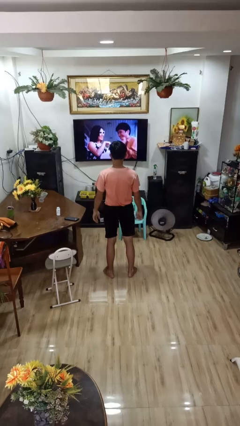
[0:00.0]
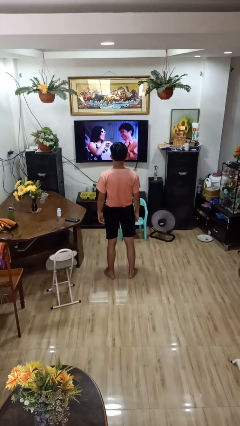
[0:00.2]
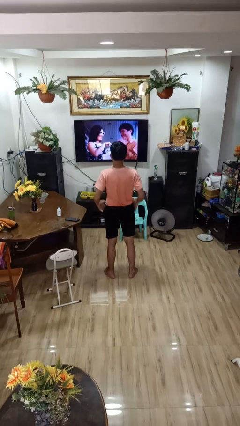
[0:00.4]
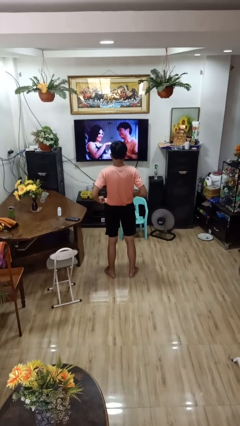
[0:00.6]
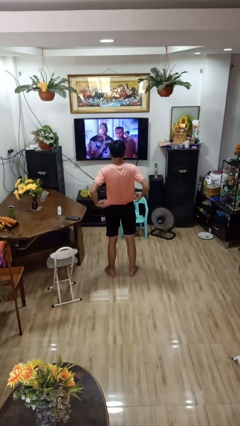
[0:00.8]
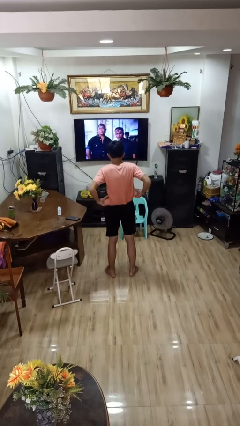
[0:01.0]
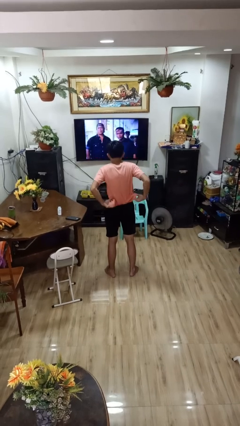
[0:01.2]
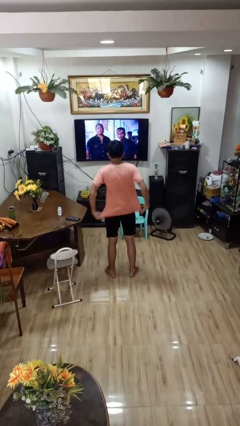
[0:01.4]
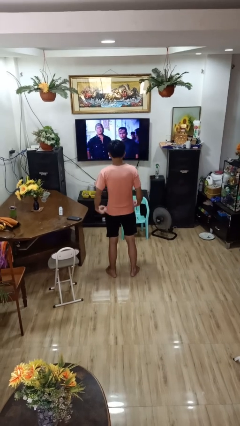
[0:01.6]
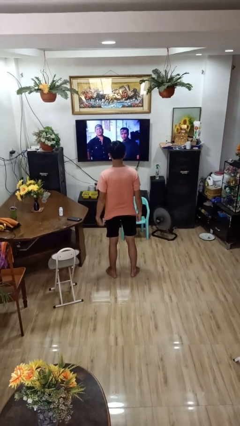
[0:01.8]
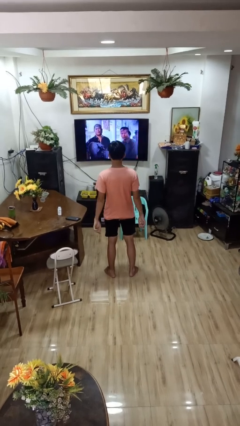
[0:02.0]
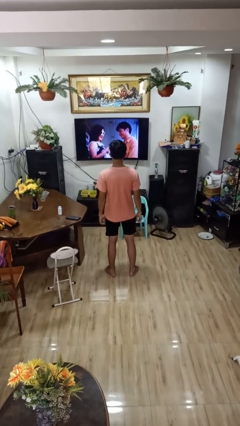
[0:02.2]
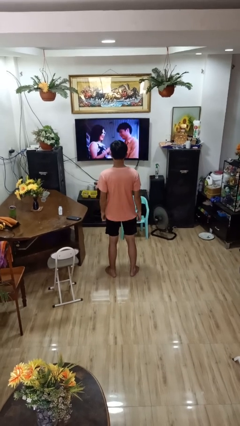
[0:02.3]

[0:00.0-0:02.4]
person untucks shirt

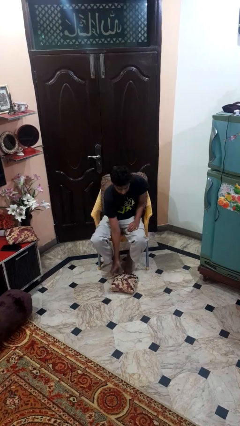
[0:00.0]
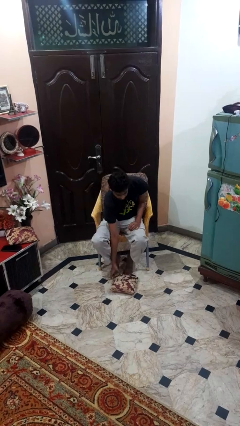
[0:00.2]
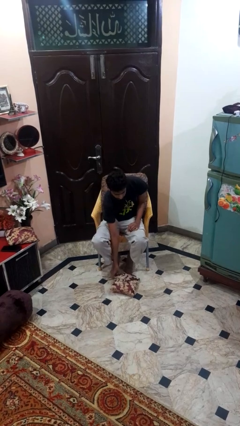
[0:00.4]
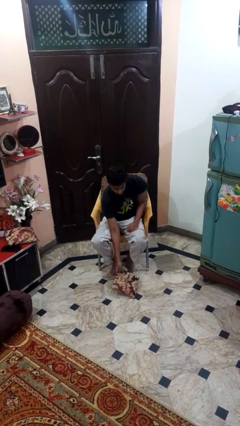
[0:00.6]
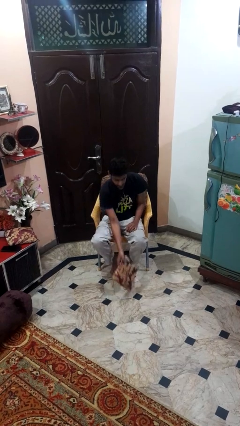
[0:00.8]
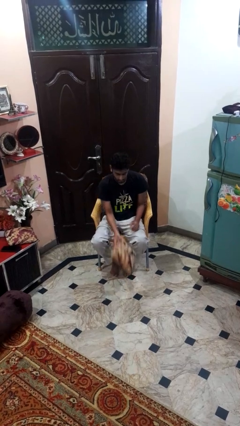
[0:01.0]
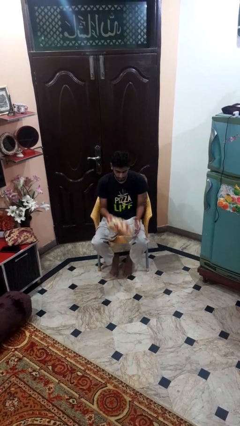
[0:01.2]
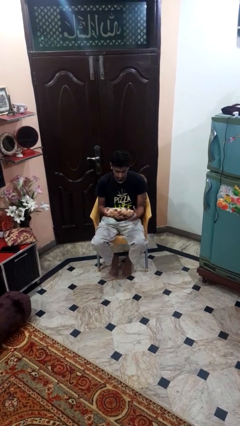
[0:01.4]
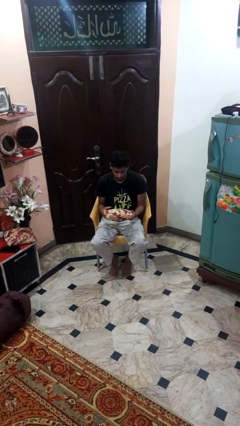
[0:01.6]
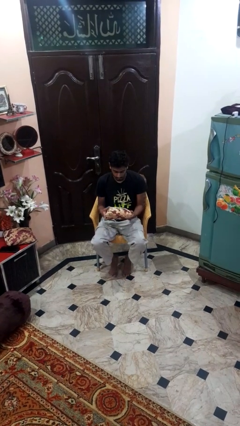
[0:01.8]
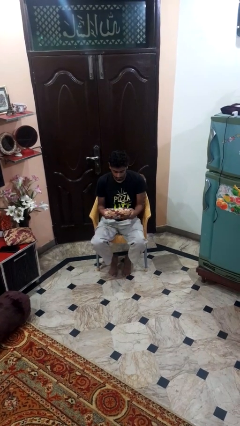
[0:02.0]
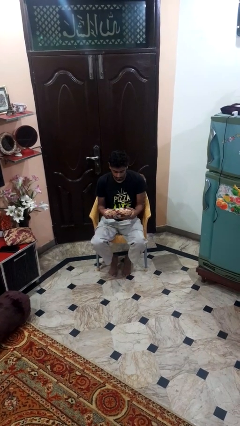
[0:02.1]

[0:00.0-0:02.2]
person picks up object from floor

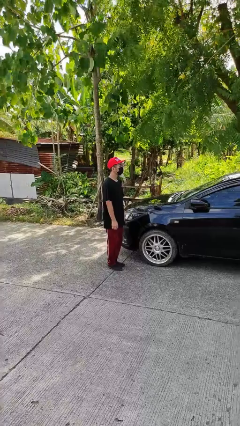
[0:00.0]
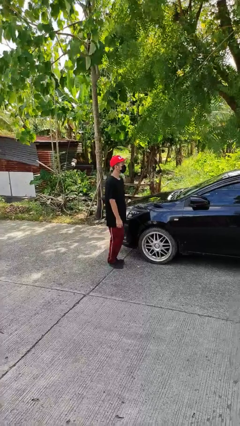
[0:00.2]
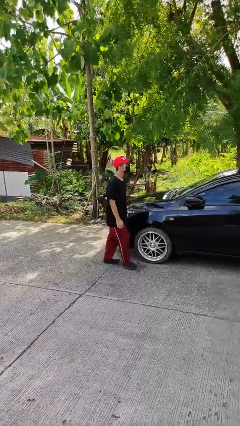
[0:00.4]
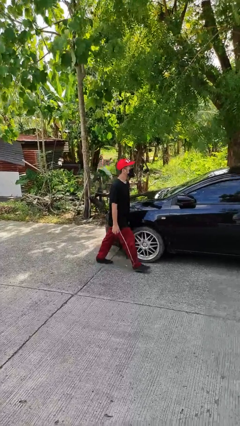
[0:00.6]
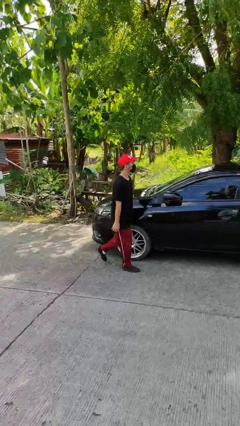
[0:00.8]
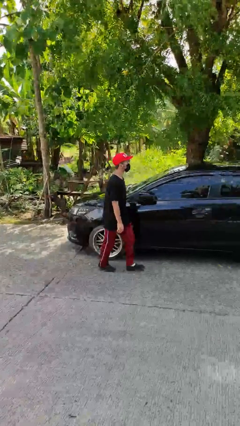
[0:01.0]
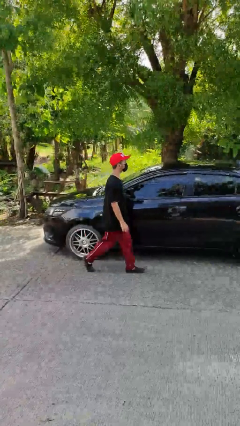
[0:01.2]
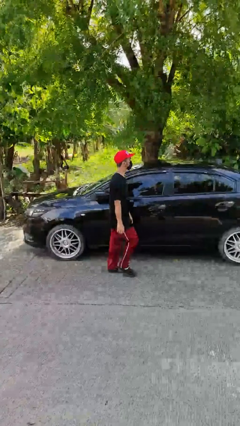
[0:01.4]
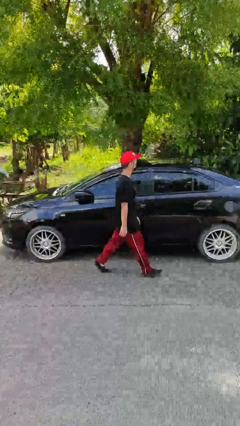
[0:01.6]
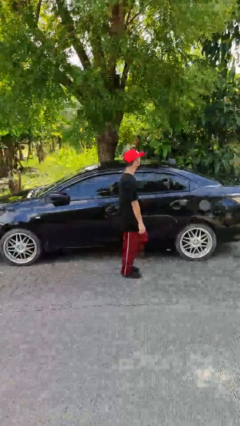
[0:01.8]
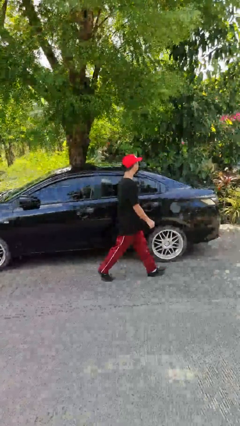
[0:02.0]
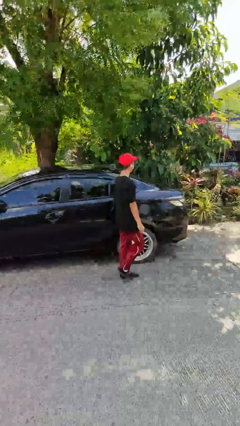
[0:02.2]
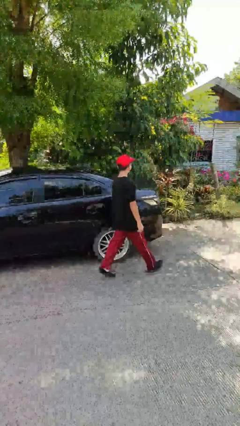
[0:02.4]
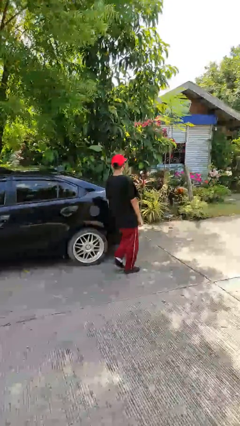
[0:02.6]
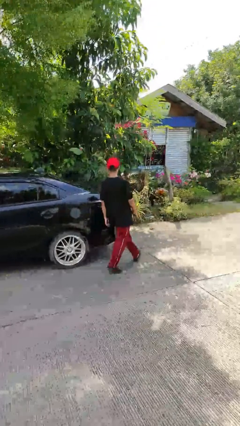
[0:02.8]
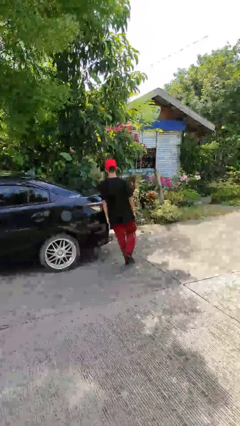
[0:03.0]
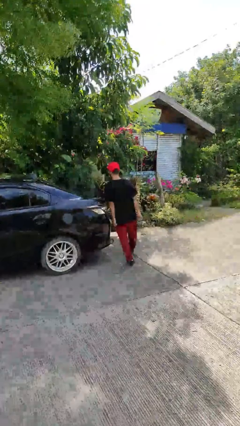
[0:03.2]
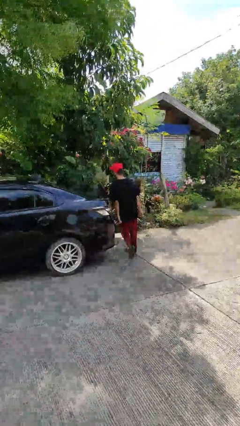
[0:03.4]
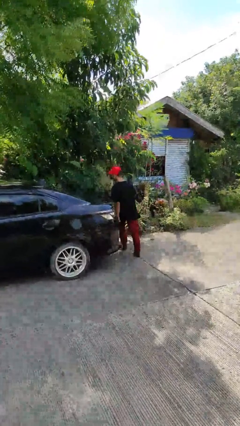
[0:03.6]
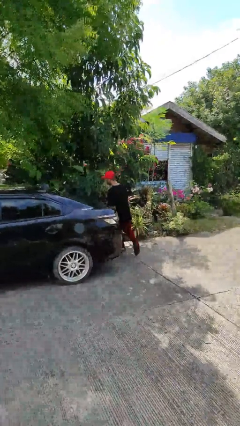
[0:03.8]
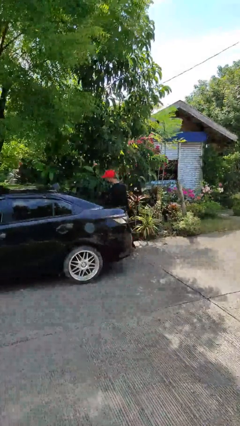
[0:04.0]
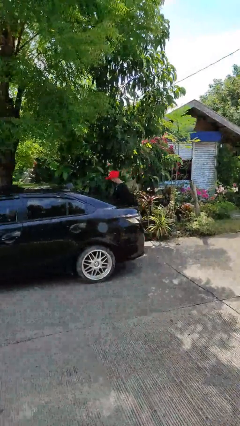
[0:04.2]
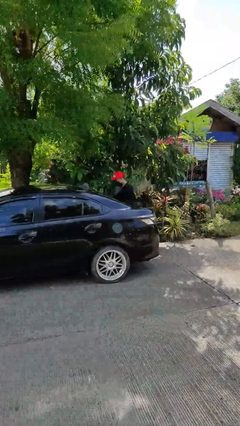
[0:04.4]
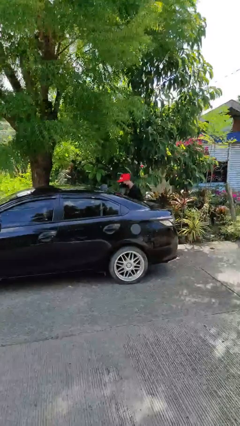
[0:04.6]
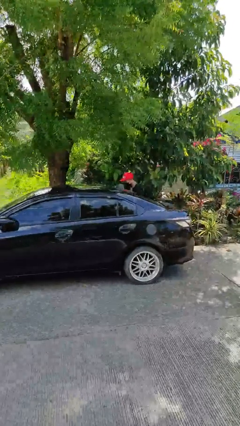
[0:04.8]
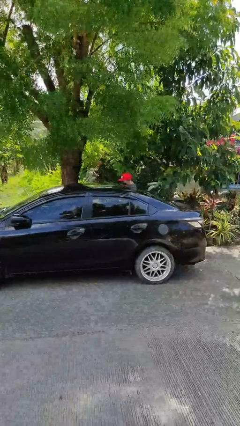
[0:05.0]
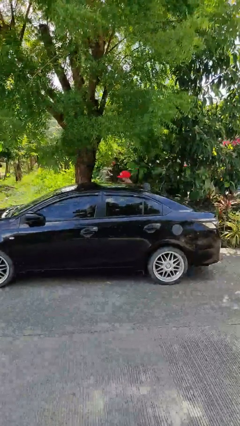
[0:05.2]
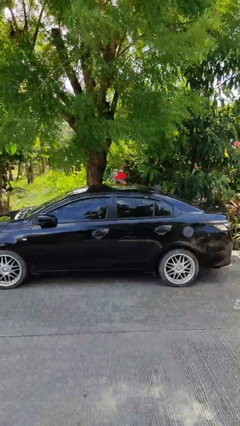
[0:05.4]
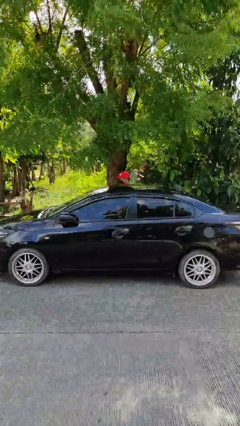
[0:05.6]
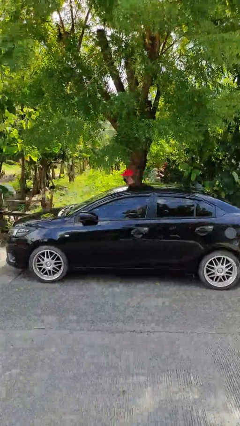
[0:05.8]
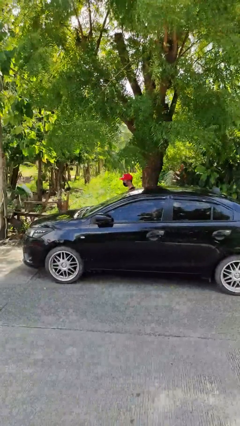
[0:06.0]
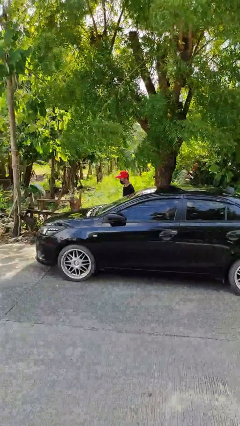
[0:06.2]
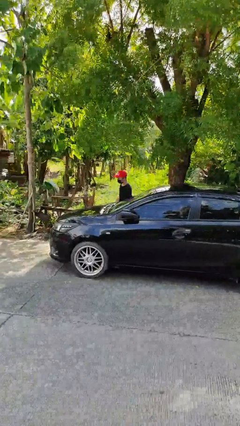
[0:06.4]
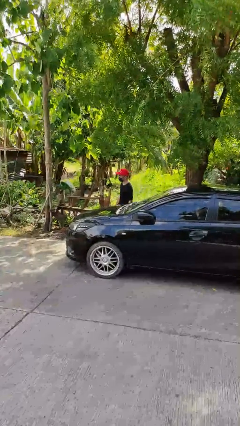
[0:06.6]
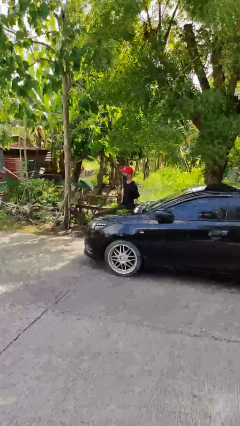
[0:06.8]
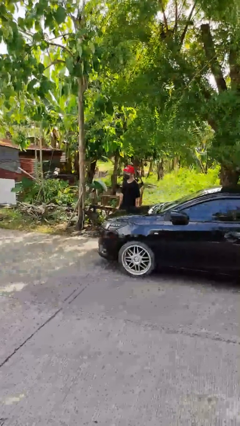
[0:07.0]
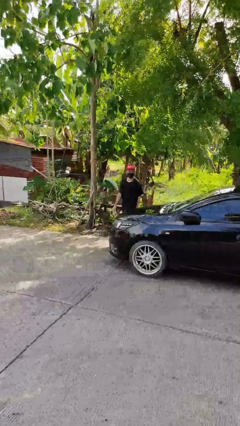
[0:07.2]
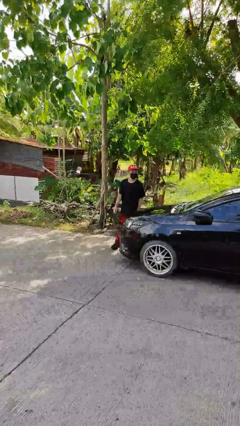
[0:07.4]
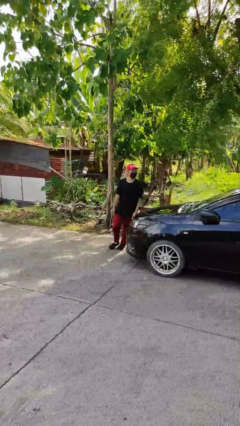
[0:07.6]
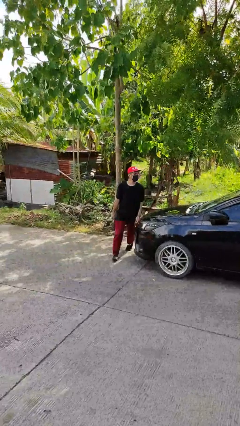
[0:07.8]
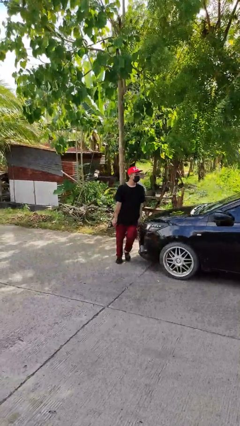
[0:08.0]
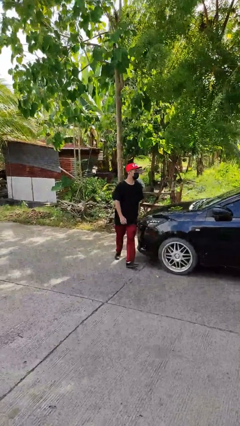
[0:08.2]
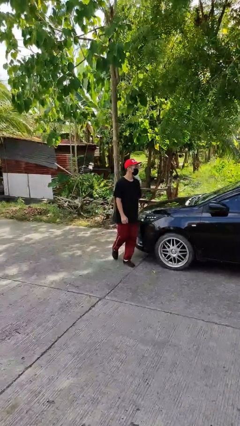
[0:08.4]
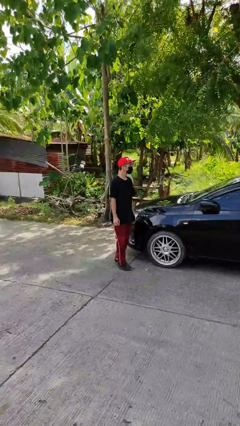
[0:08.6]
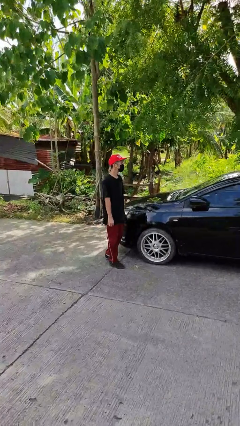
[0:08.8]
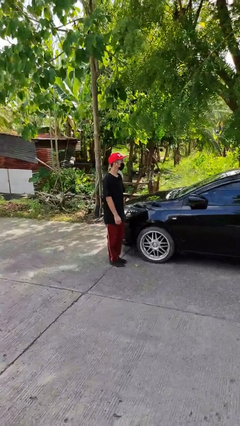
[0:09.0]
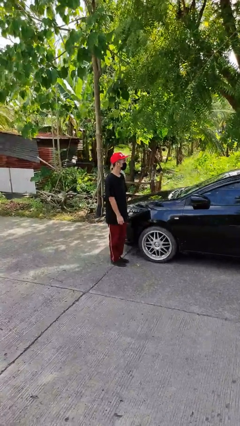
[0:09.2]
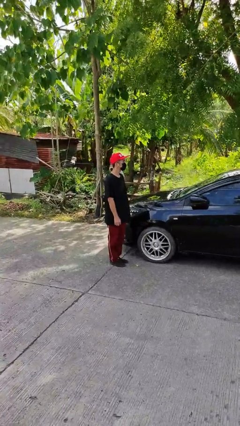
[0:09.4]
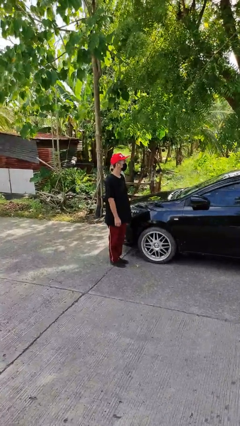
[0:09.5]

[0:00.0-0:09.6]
person walks around car

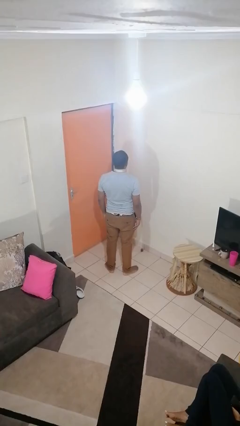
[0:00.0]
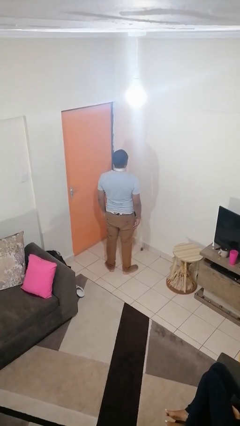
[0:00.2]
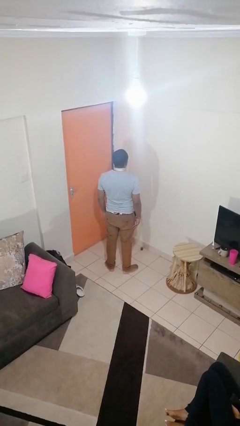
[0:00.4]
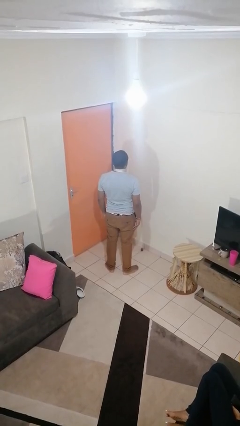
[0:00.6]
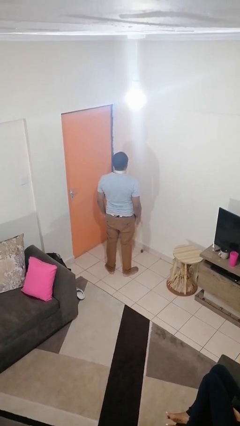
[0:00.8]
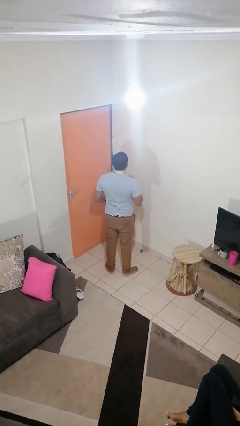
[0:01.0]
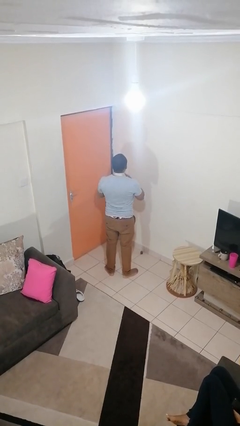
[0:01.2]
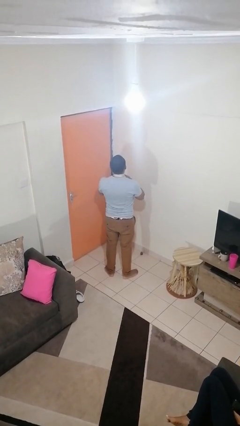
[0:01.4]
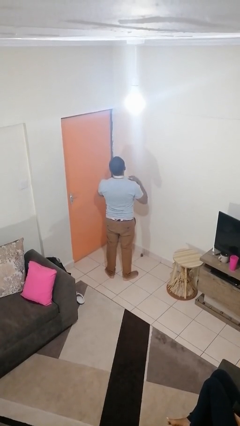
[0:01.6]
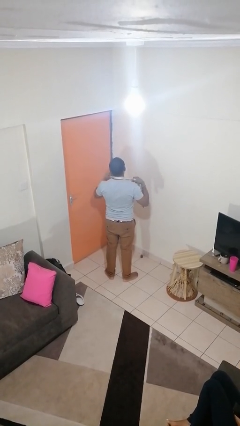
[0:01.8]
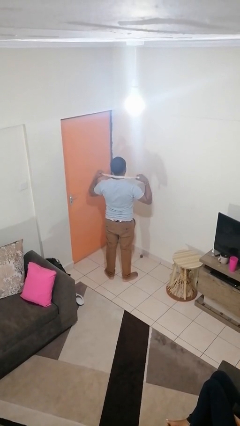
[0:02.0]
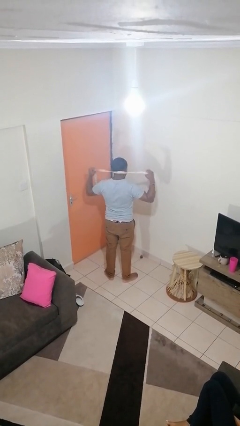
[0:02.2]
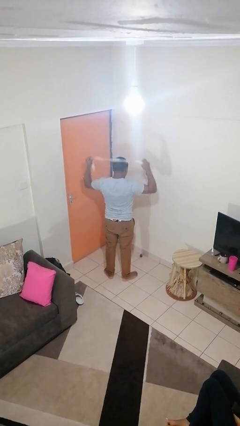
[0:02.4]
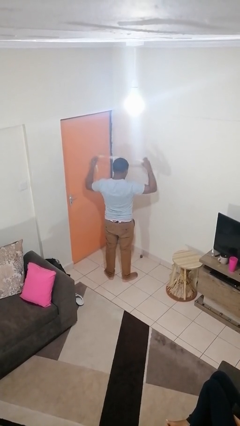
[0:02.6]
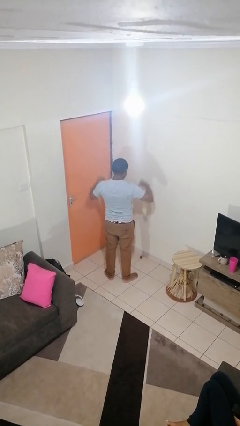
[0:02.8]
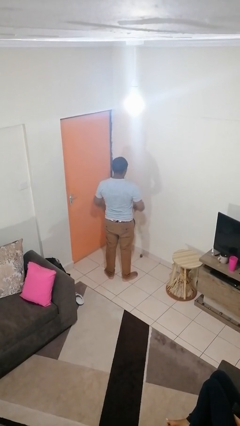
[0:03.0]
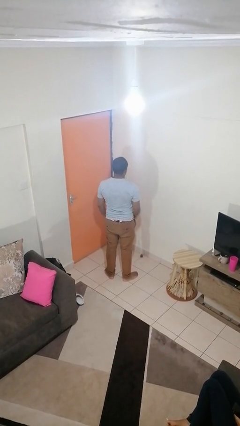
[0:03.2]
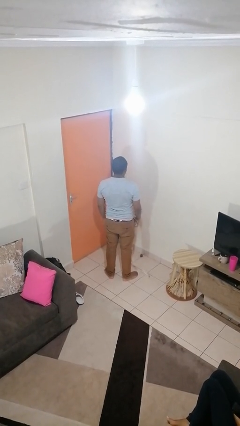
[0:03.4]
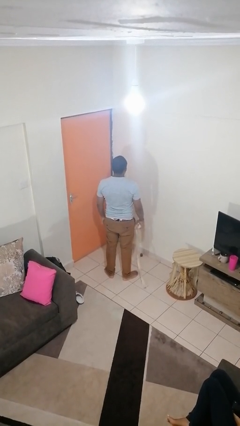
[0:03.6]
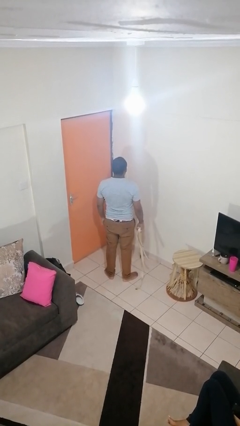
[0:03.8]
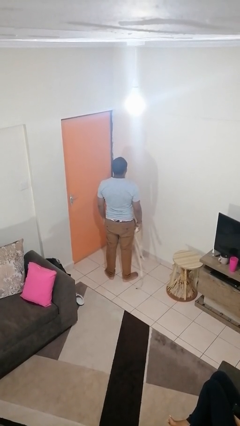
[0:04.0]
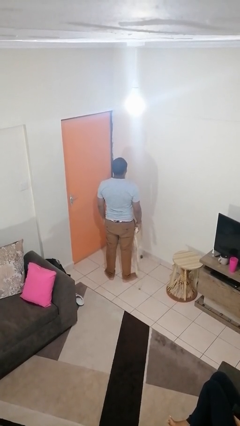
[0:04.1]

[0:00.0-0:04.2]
person takes off necktie
